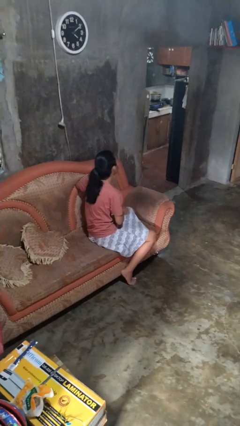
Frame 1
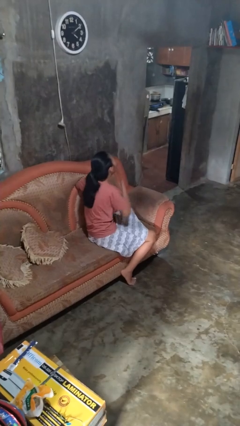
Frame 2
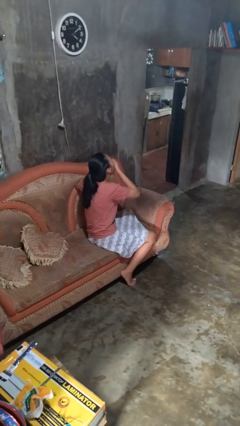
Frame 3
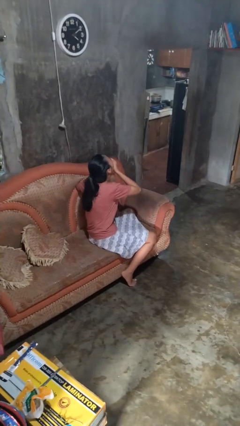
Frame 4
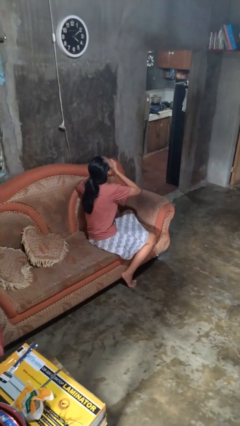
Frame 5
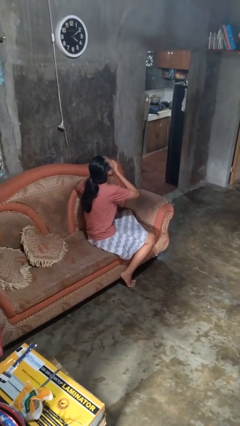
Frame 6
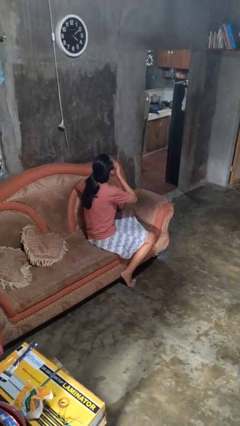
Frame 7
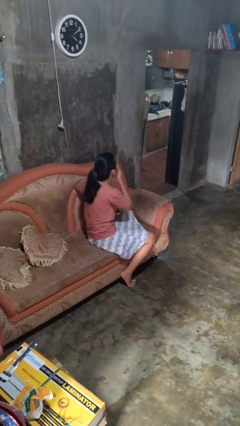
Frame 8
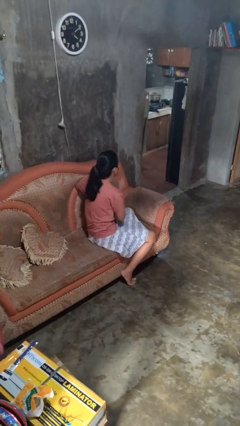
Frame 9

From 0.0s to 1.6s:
person yawns

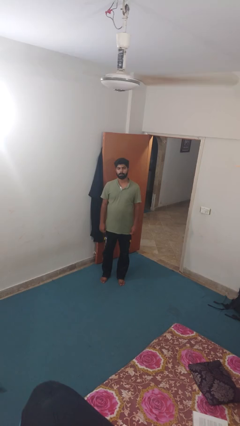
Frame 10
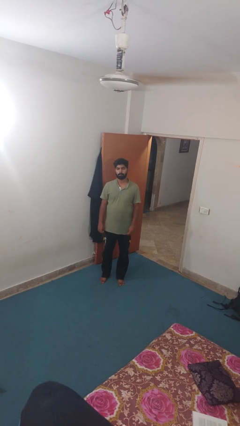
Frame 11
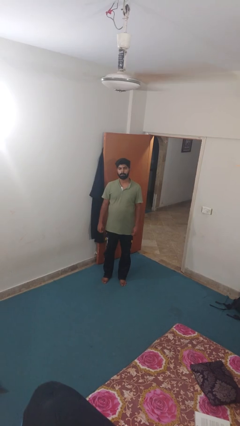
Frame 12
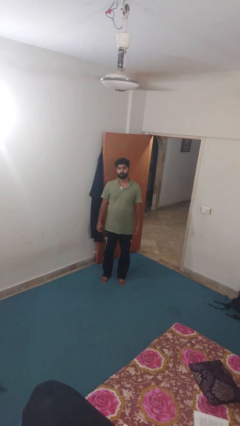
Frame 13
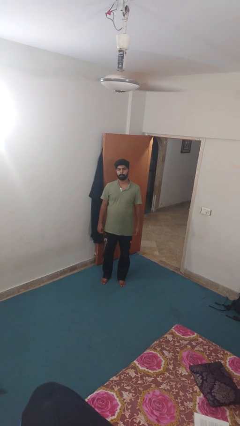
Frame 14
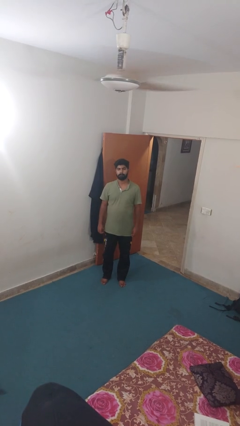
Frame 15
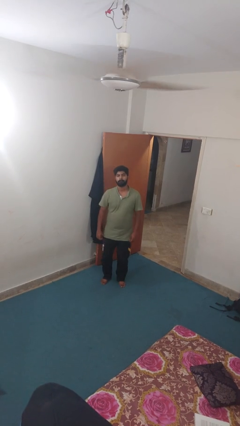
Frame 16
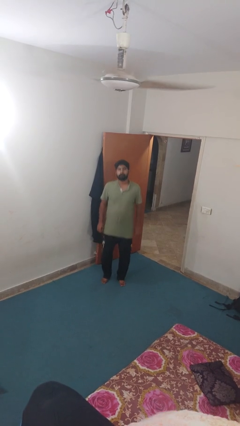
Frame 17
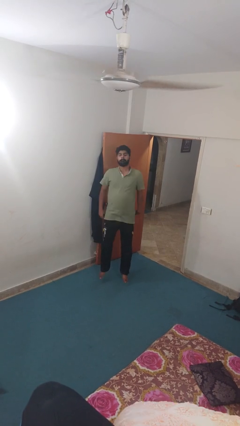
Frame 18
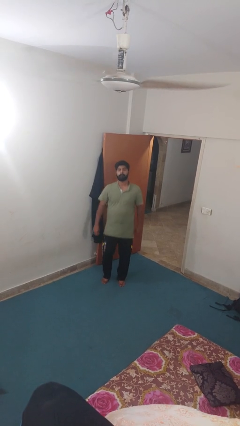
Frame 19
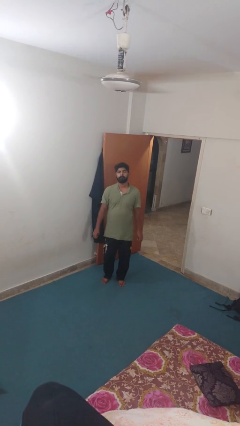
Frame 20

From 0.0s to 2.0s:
person jumps

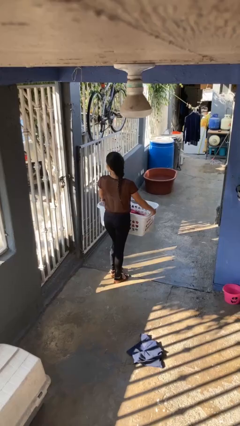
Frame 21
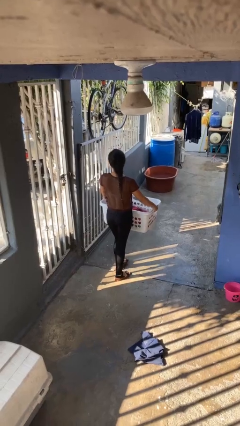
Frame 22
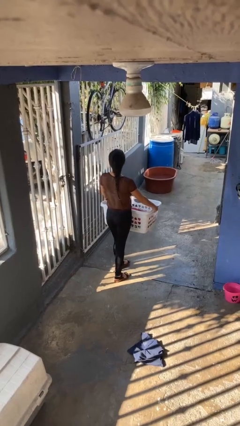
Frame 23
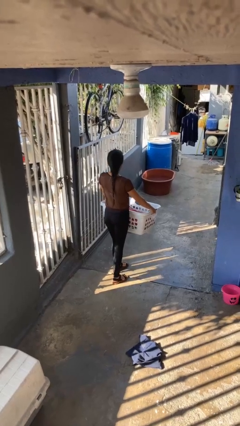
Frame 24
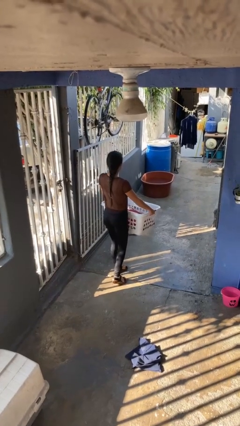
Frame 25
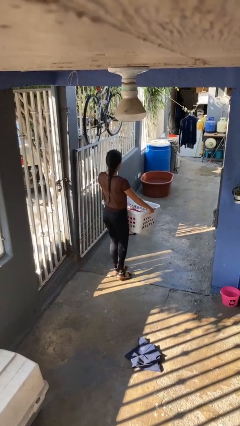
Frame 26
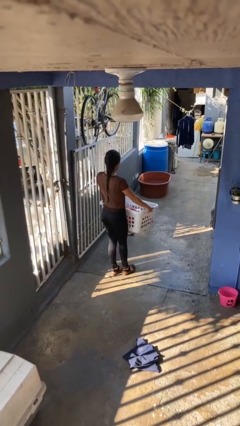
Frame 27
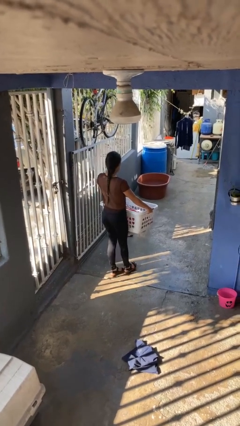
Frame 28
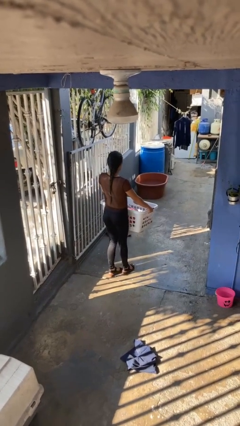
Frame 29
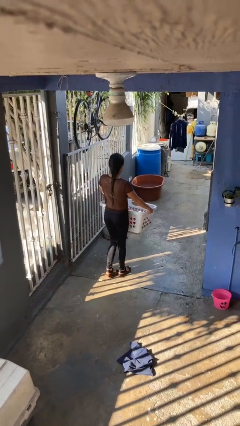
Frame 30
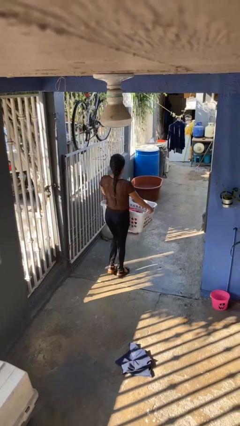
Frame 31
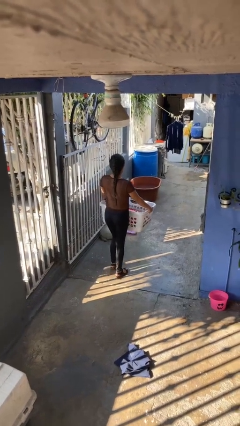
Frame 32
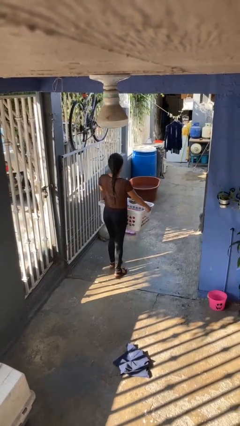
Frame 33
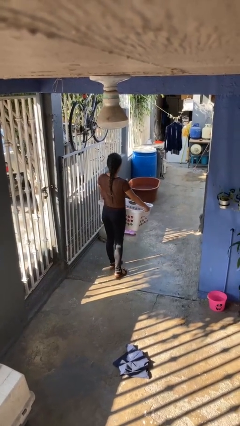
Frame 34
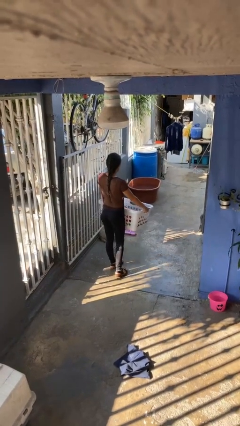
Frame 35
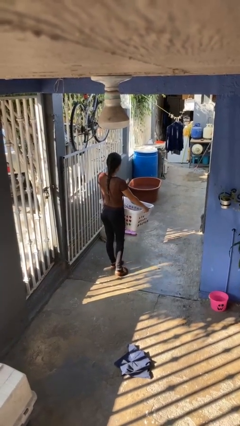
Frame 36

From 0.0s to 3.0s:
person carries laundry basket

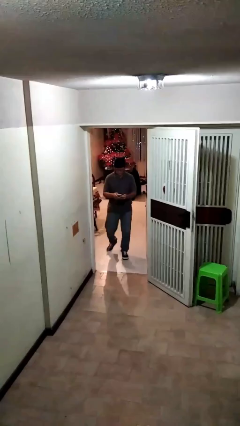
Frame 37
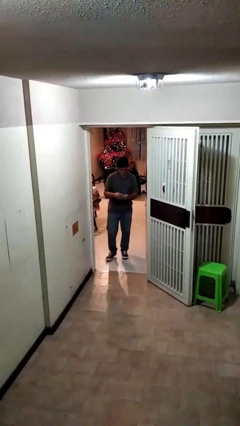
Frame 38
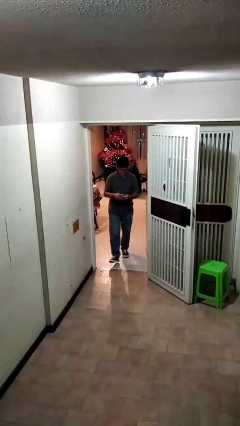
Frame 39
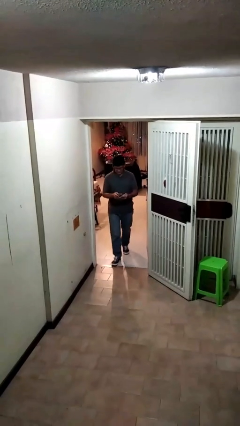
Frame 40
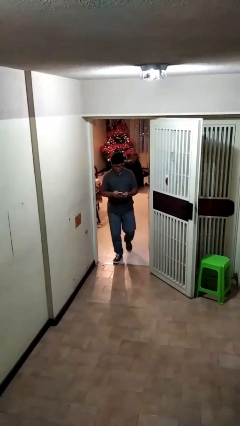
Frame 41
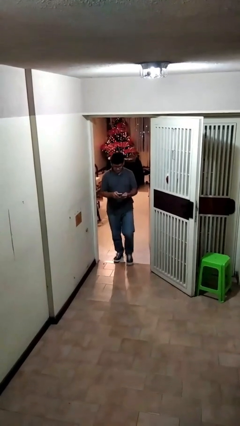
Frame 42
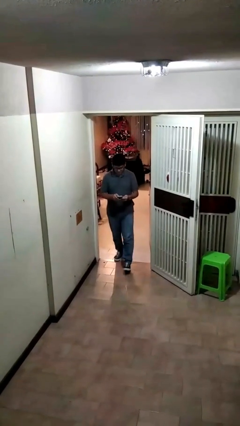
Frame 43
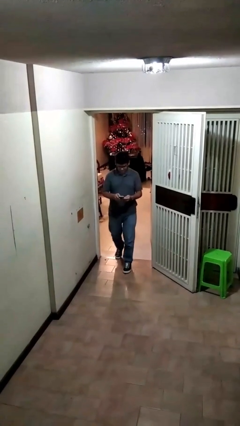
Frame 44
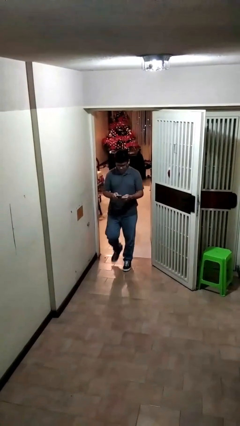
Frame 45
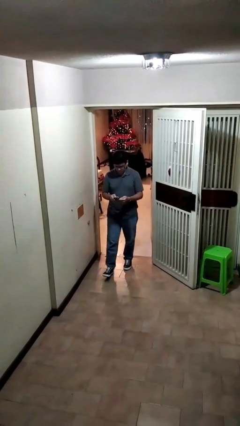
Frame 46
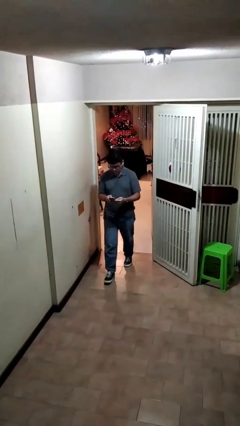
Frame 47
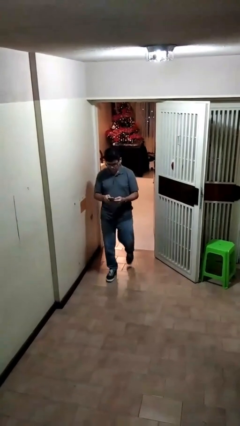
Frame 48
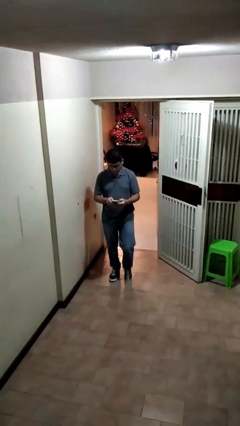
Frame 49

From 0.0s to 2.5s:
person enters scene through structure

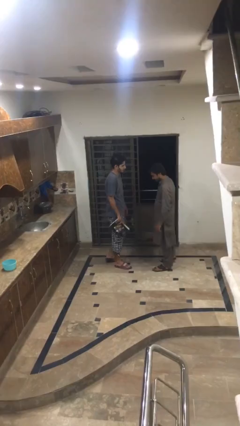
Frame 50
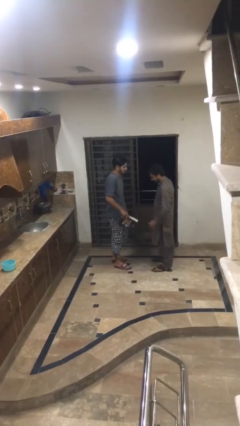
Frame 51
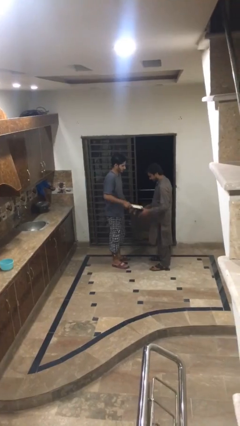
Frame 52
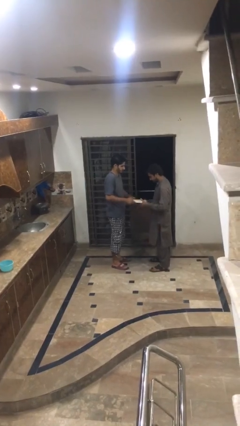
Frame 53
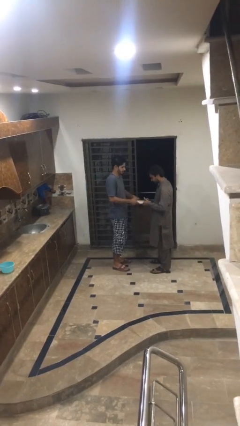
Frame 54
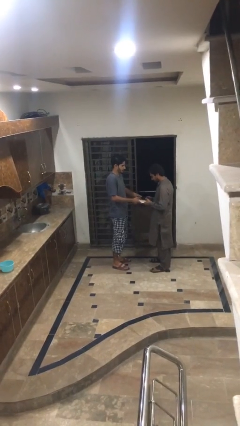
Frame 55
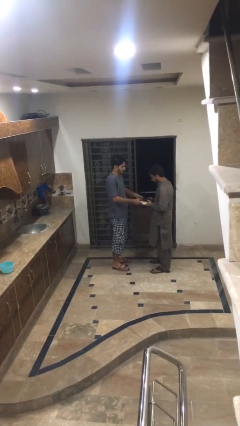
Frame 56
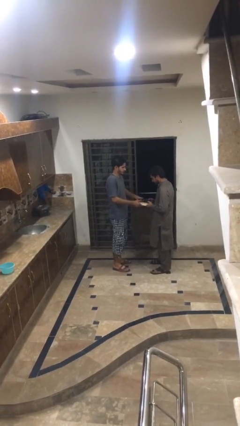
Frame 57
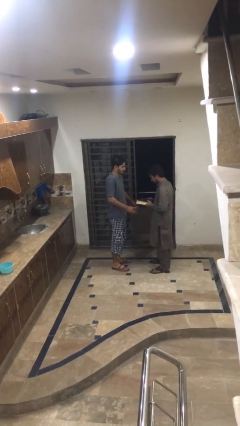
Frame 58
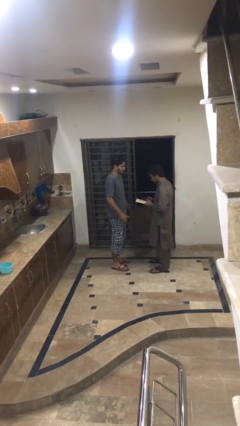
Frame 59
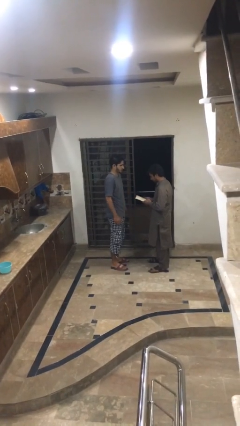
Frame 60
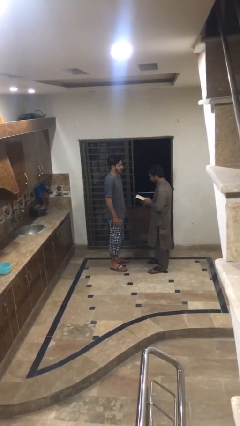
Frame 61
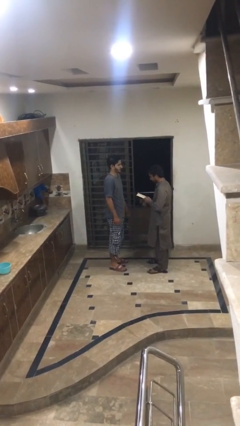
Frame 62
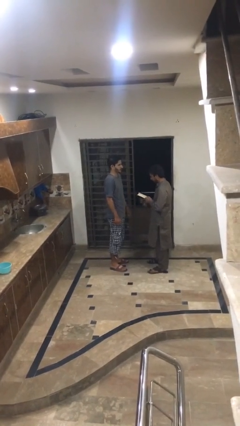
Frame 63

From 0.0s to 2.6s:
person transfers object to person

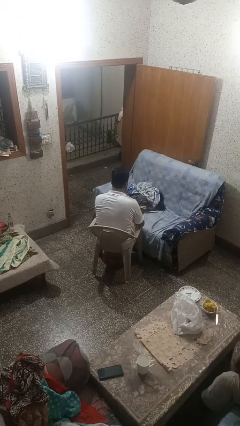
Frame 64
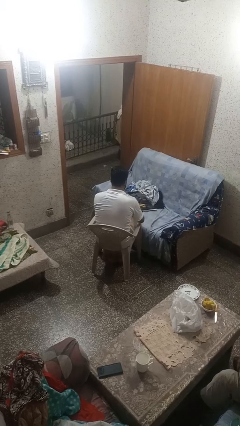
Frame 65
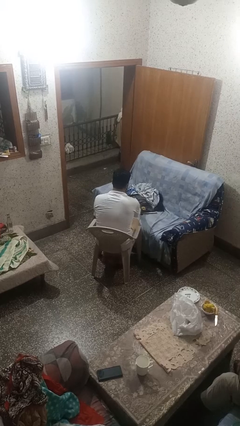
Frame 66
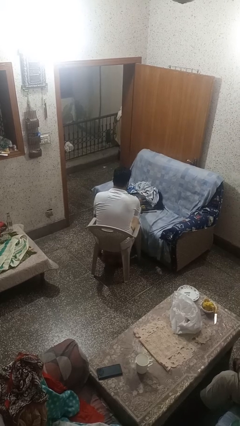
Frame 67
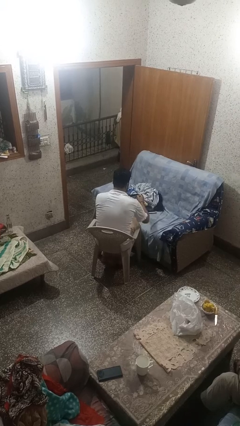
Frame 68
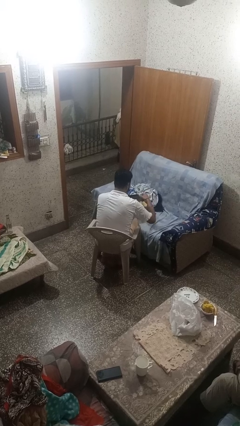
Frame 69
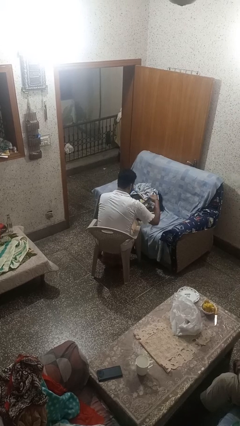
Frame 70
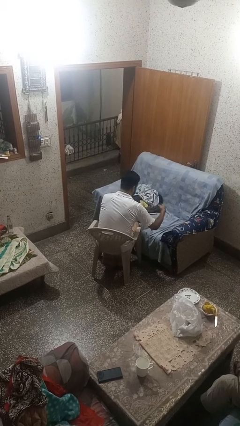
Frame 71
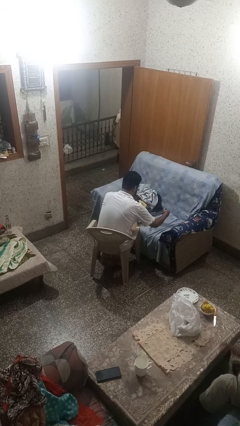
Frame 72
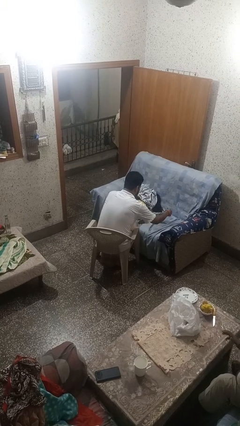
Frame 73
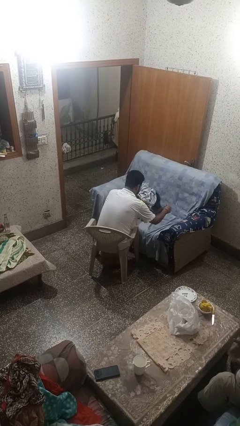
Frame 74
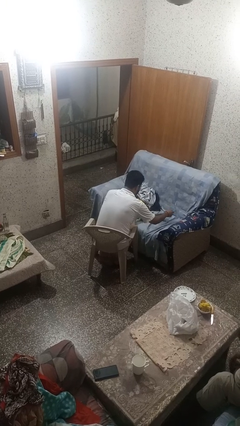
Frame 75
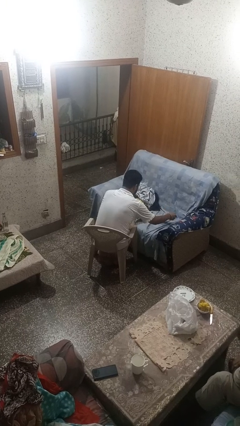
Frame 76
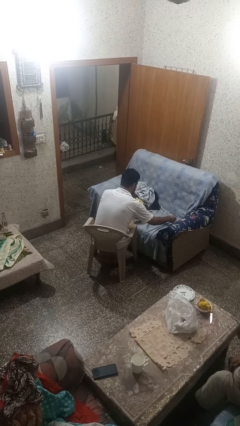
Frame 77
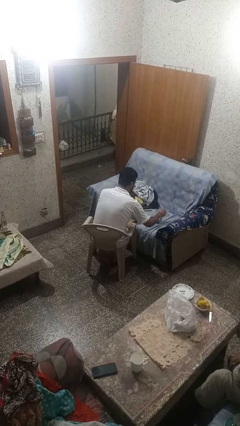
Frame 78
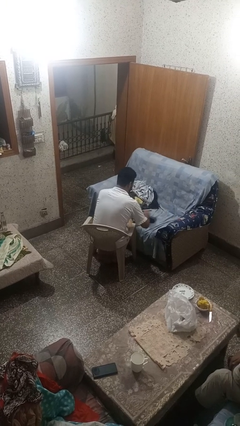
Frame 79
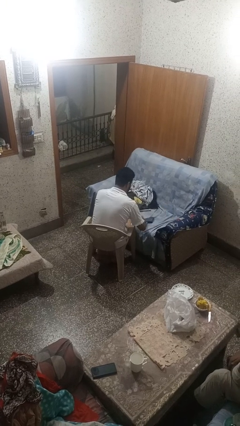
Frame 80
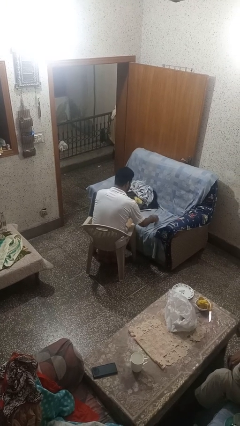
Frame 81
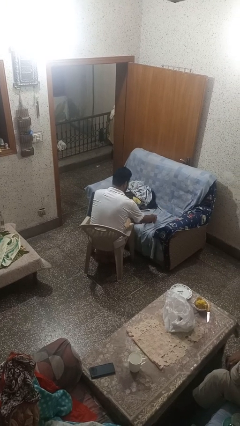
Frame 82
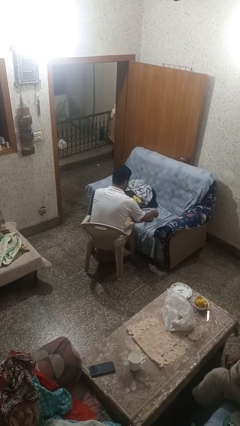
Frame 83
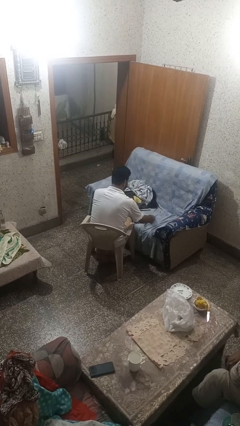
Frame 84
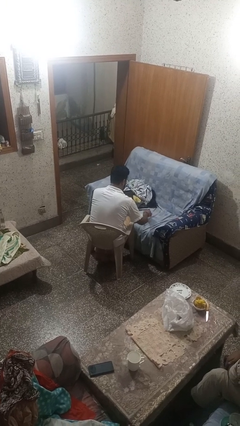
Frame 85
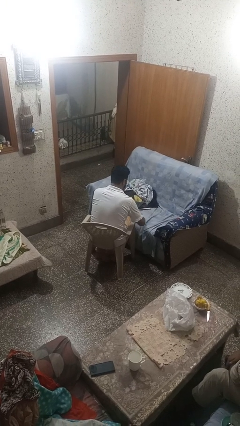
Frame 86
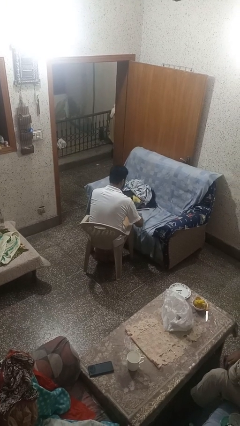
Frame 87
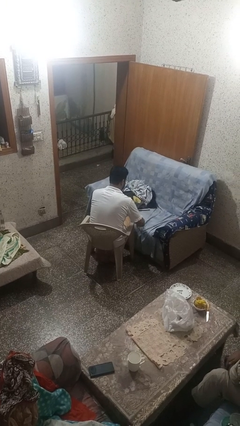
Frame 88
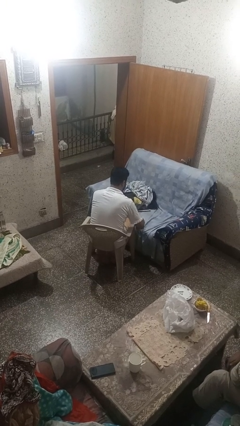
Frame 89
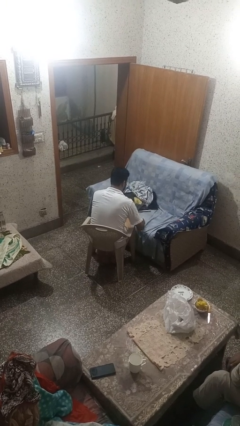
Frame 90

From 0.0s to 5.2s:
person folds socks

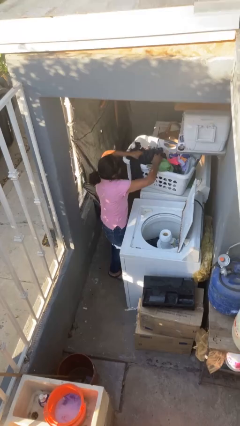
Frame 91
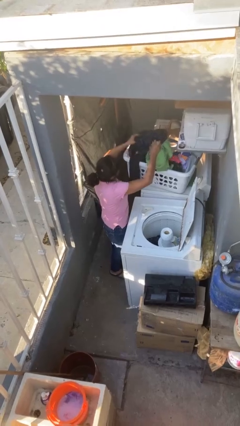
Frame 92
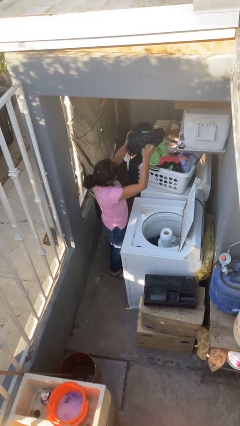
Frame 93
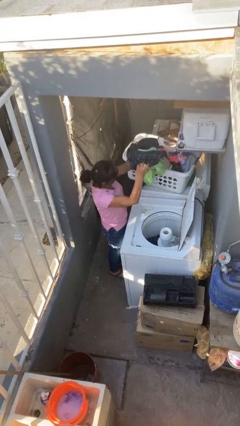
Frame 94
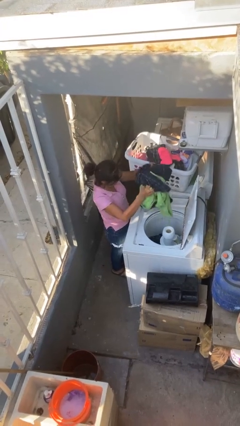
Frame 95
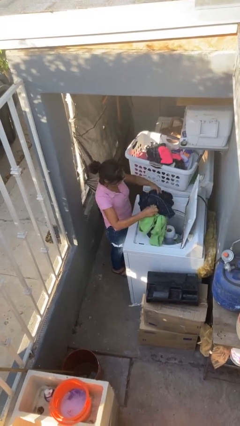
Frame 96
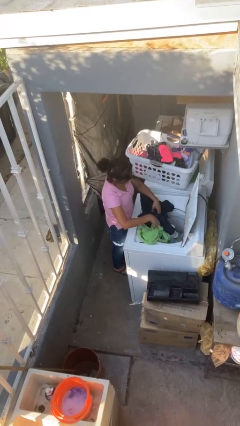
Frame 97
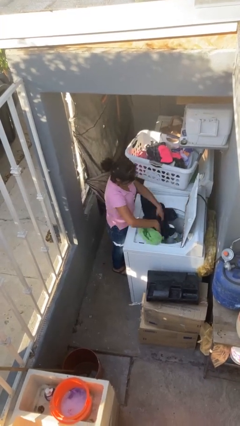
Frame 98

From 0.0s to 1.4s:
person unloads clotheswasher
